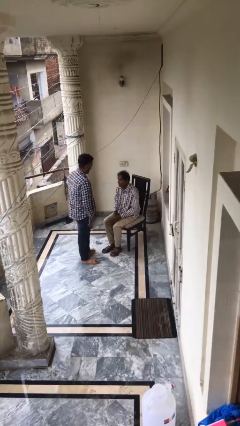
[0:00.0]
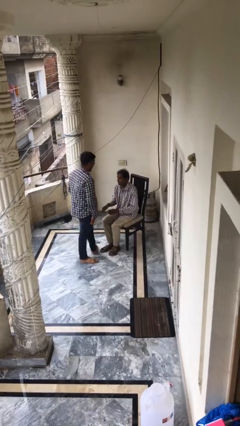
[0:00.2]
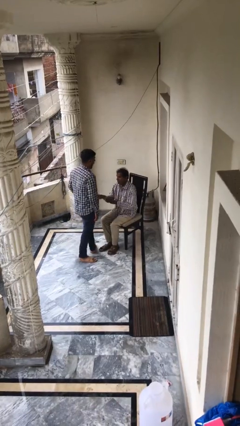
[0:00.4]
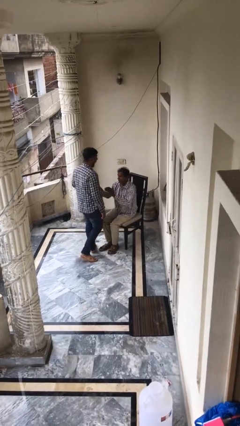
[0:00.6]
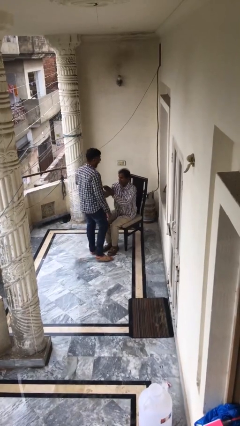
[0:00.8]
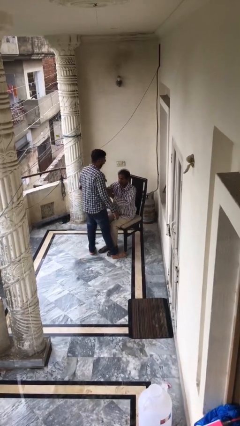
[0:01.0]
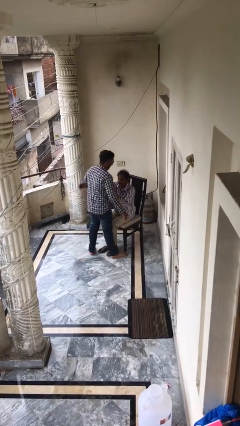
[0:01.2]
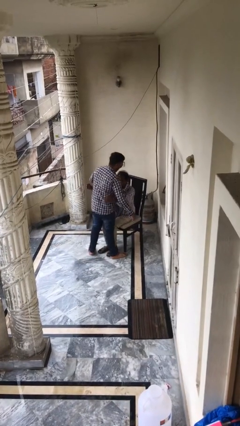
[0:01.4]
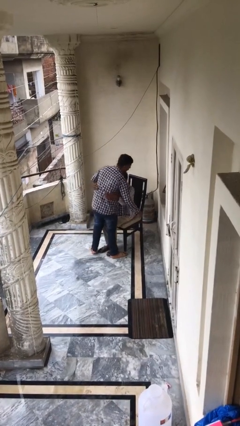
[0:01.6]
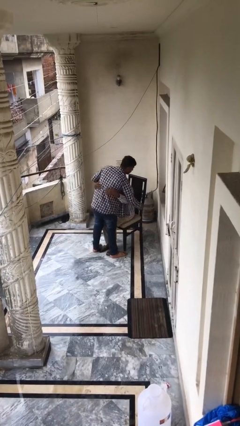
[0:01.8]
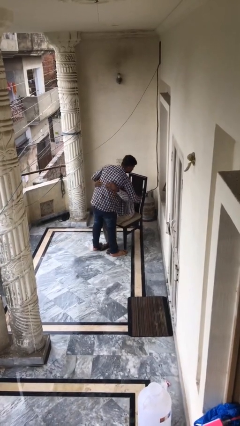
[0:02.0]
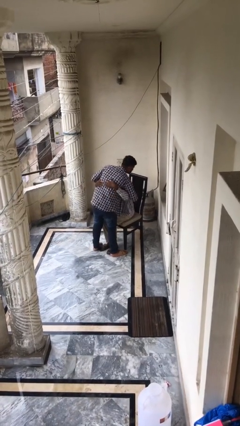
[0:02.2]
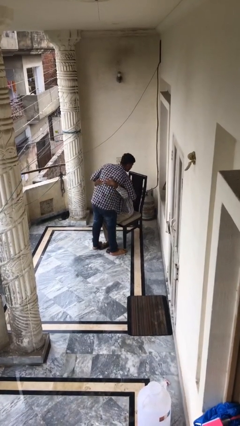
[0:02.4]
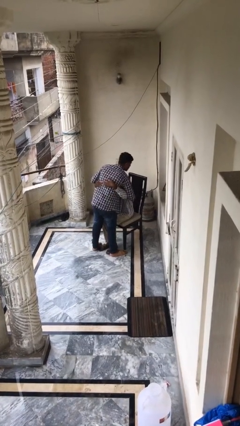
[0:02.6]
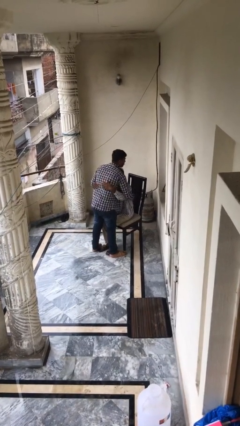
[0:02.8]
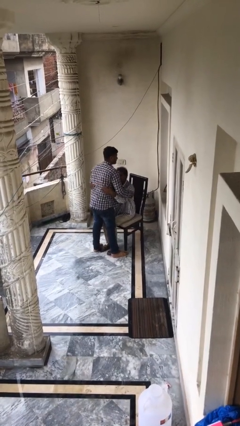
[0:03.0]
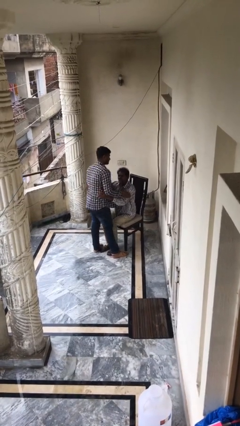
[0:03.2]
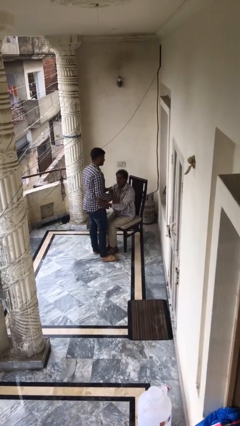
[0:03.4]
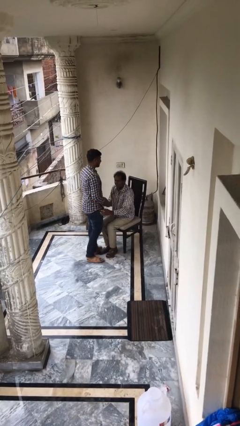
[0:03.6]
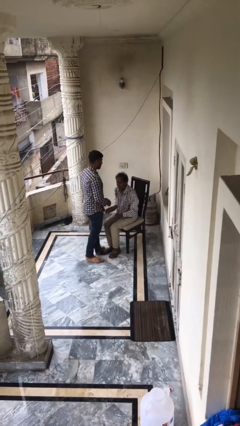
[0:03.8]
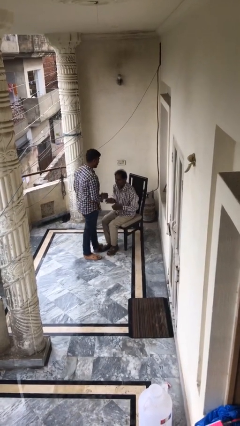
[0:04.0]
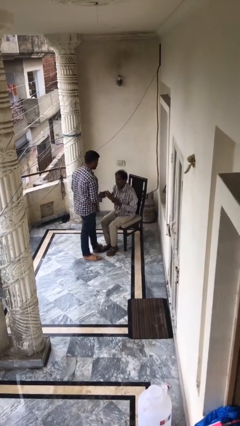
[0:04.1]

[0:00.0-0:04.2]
person embraces person

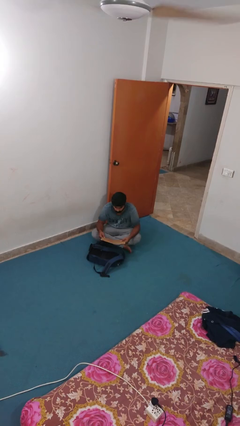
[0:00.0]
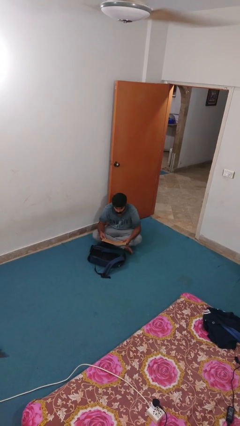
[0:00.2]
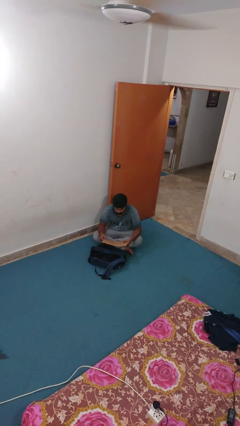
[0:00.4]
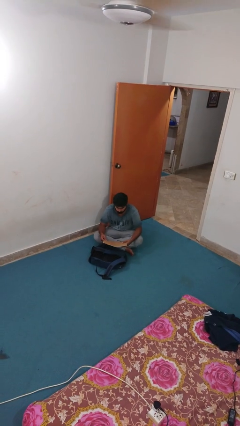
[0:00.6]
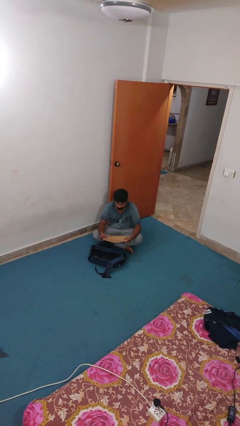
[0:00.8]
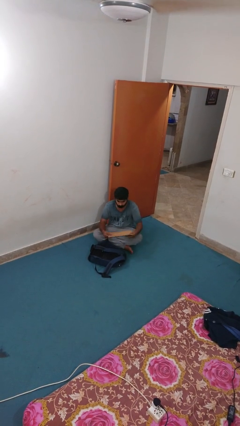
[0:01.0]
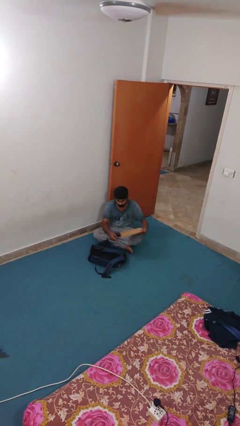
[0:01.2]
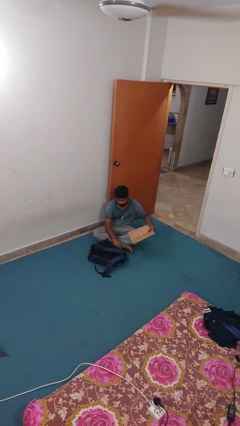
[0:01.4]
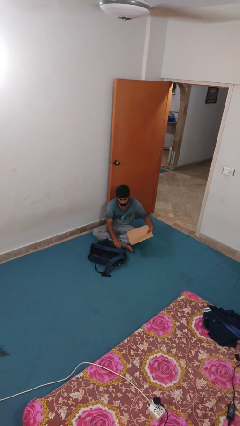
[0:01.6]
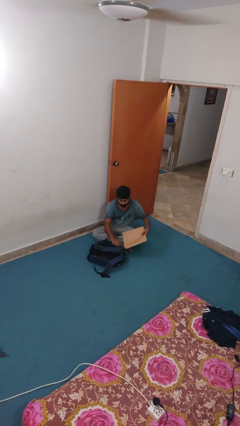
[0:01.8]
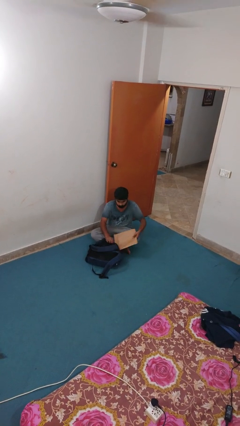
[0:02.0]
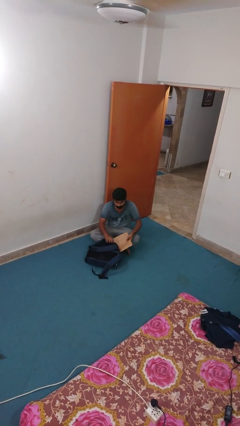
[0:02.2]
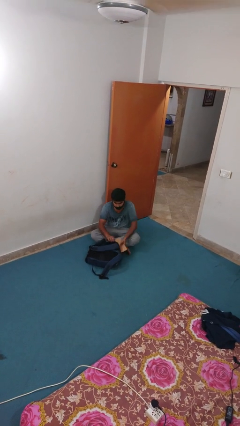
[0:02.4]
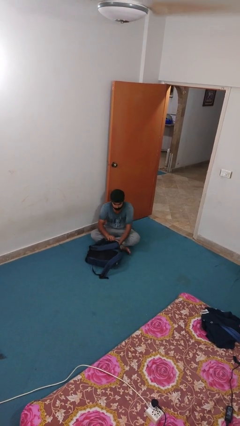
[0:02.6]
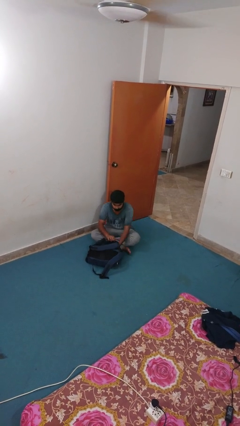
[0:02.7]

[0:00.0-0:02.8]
person puts object into backpack

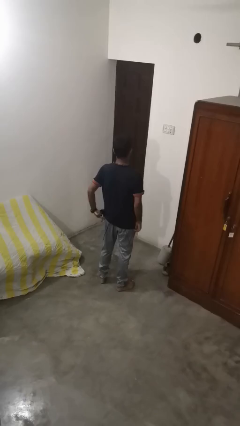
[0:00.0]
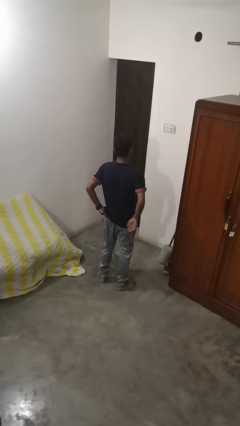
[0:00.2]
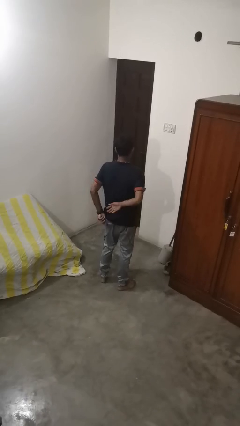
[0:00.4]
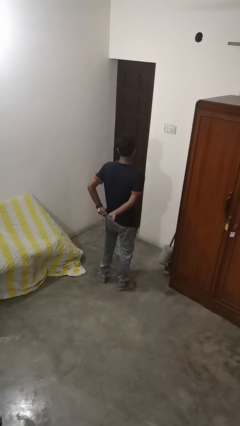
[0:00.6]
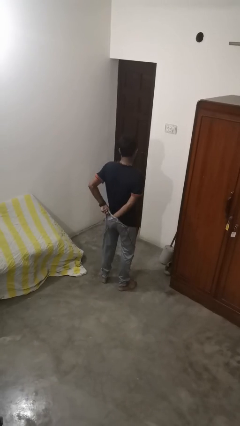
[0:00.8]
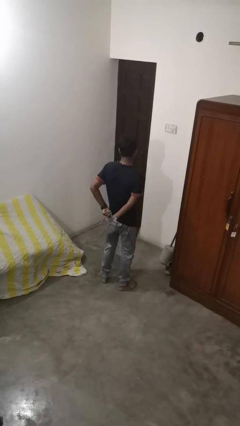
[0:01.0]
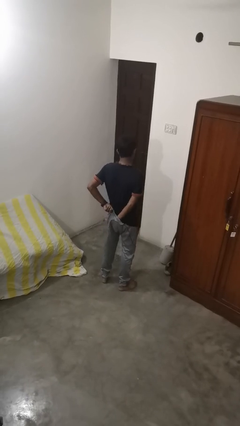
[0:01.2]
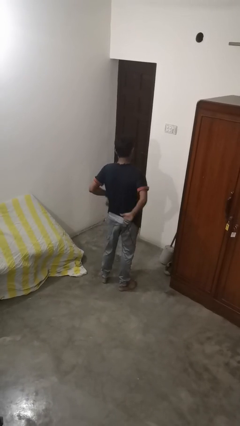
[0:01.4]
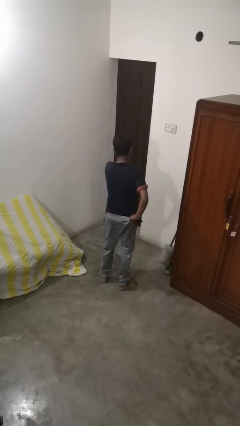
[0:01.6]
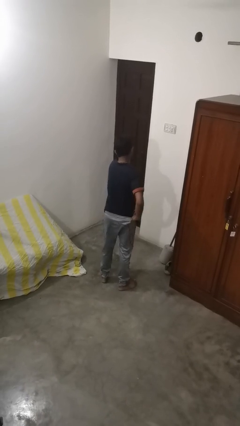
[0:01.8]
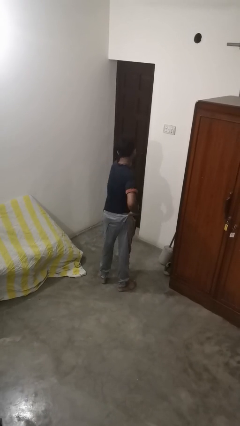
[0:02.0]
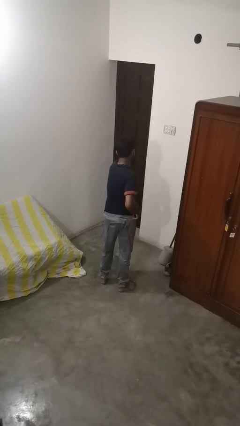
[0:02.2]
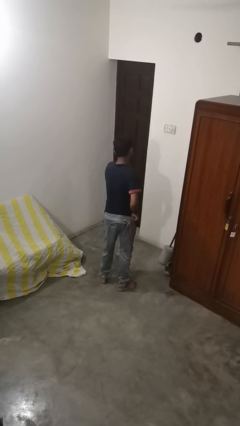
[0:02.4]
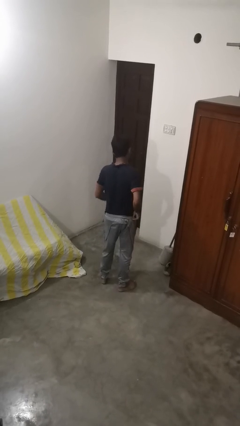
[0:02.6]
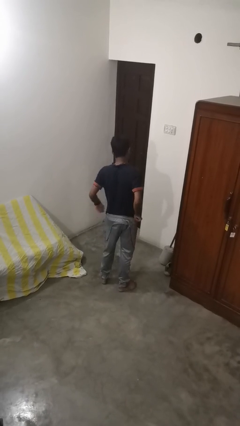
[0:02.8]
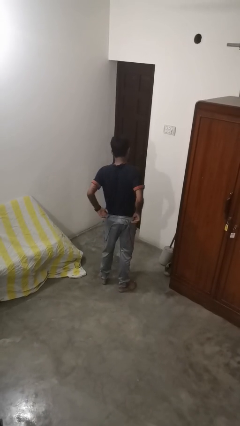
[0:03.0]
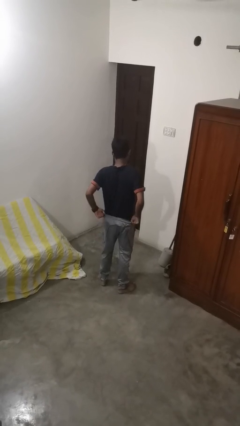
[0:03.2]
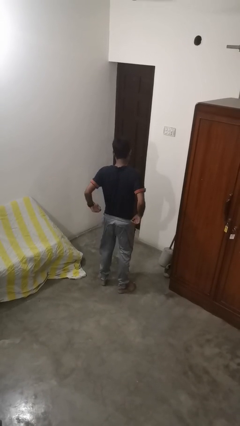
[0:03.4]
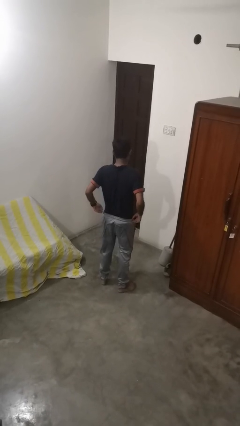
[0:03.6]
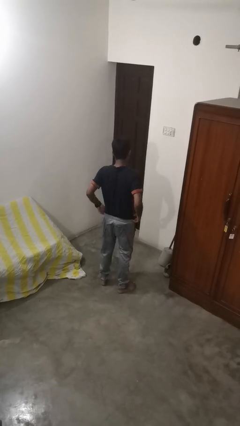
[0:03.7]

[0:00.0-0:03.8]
person tucks in shirt

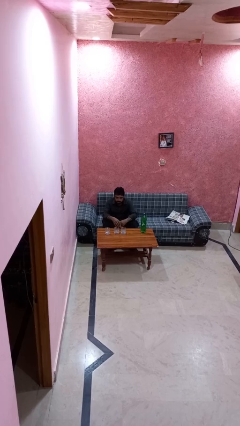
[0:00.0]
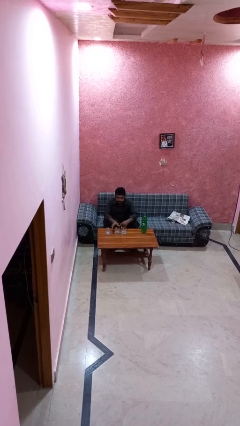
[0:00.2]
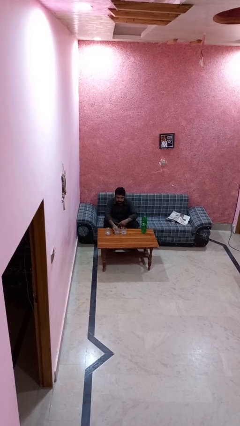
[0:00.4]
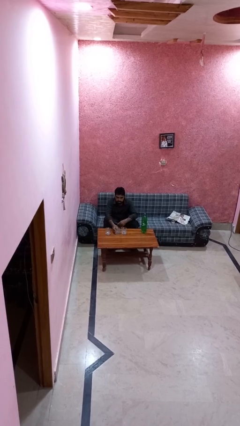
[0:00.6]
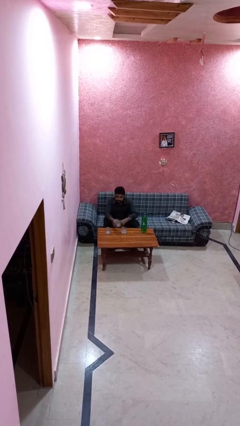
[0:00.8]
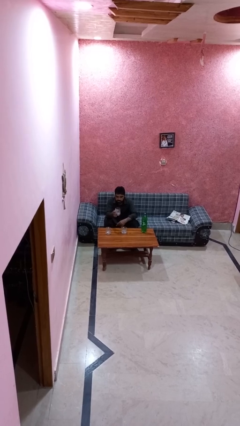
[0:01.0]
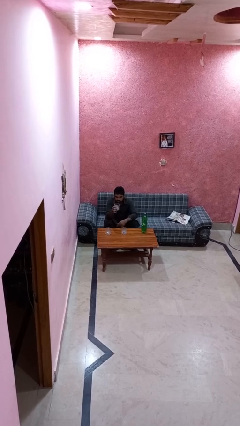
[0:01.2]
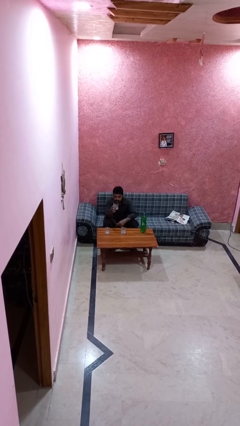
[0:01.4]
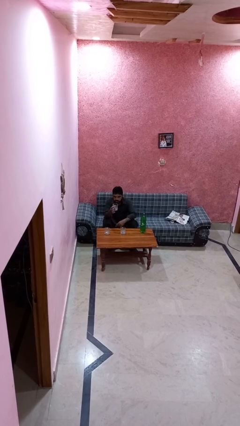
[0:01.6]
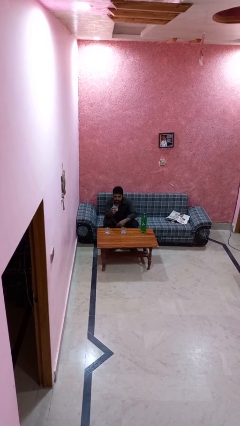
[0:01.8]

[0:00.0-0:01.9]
person picks up object from table

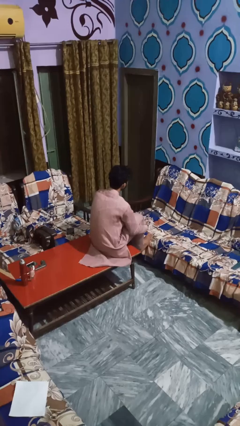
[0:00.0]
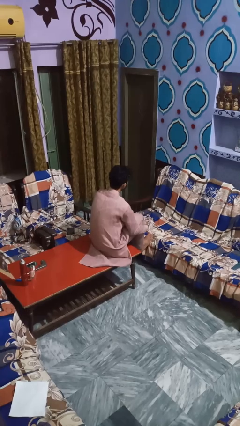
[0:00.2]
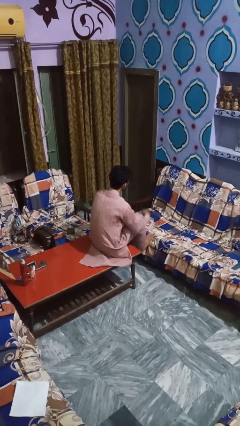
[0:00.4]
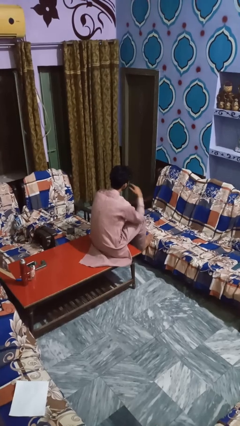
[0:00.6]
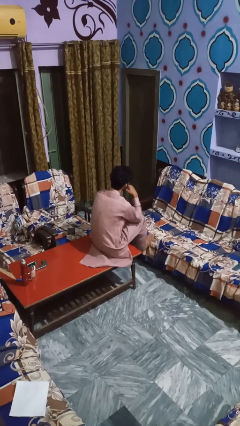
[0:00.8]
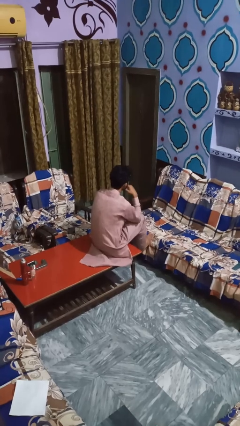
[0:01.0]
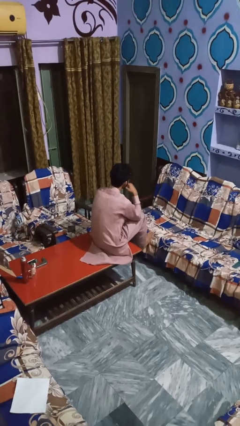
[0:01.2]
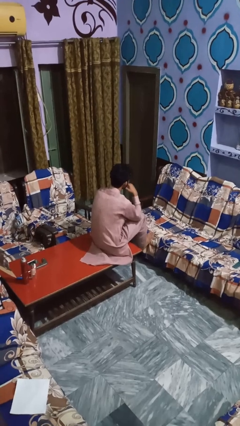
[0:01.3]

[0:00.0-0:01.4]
person licks fingers

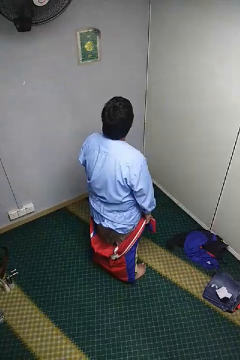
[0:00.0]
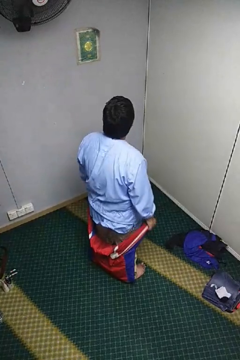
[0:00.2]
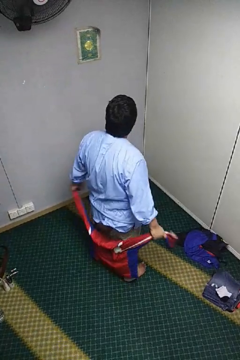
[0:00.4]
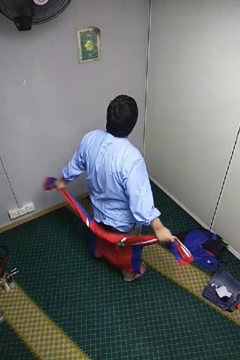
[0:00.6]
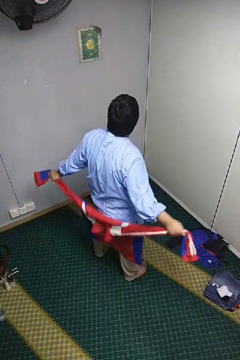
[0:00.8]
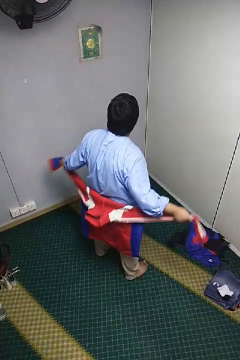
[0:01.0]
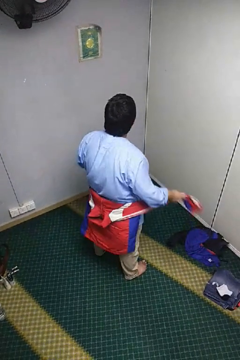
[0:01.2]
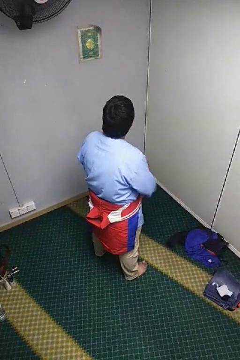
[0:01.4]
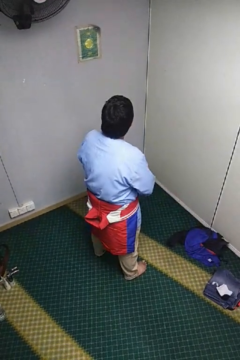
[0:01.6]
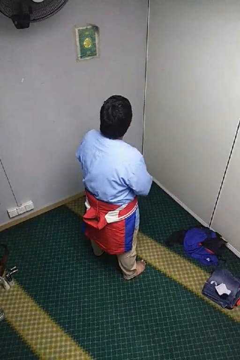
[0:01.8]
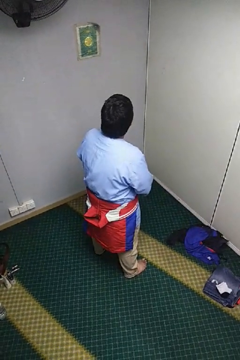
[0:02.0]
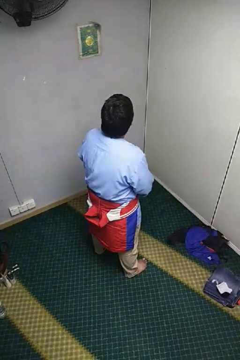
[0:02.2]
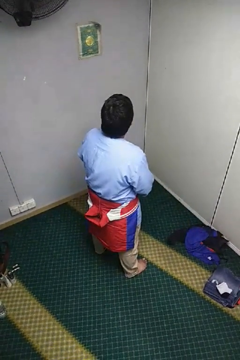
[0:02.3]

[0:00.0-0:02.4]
person ties jacket around waist

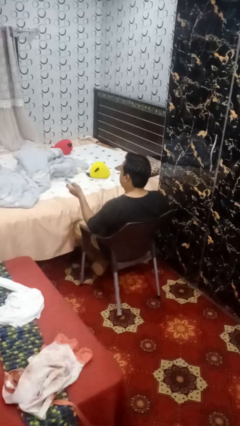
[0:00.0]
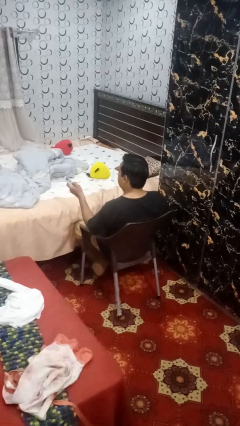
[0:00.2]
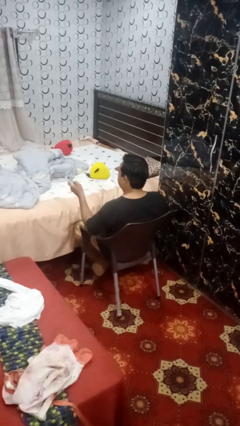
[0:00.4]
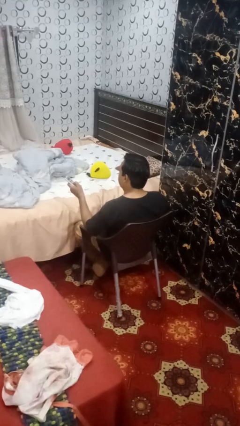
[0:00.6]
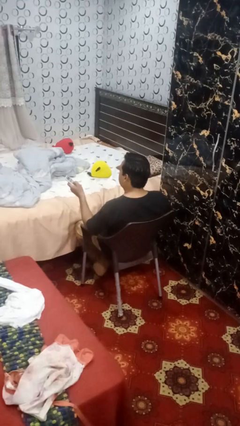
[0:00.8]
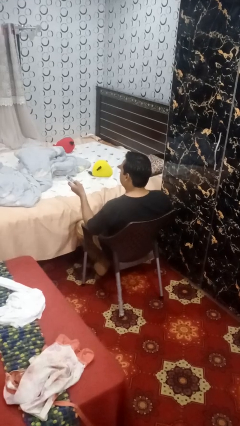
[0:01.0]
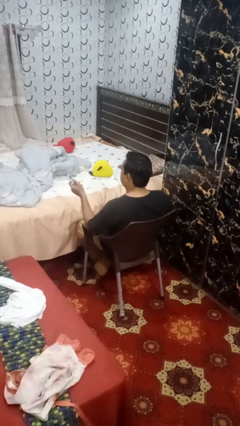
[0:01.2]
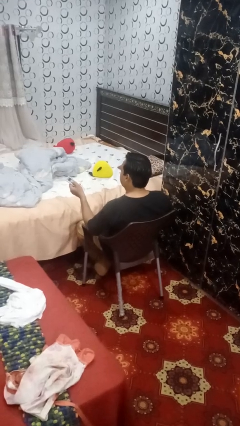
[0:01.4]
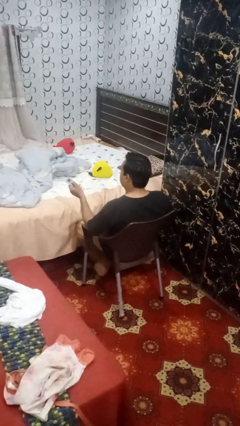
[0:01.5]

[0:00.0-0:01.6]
person uses television remote
